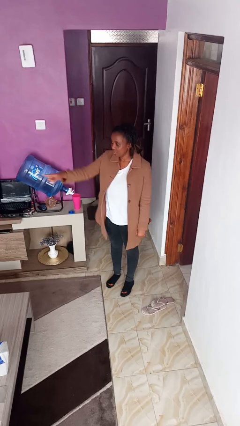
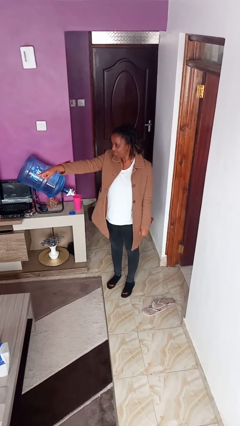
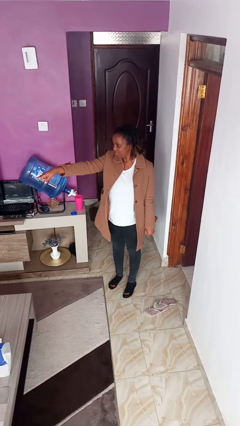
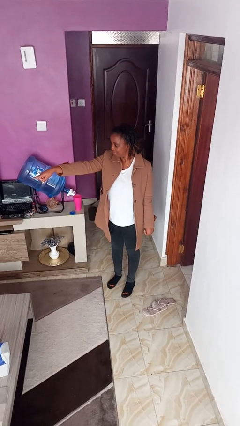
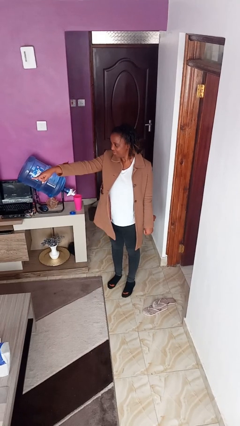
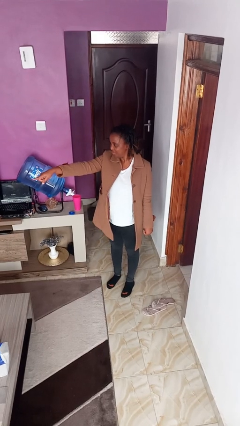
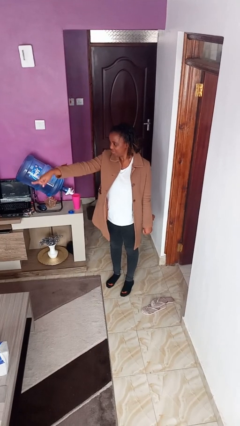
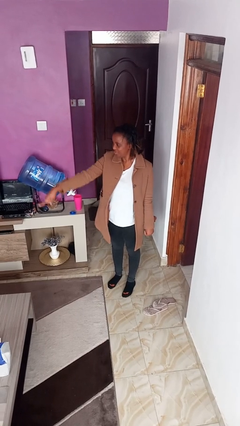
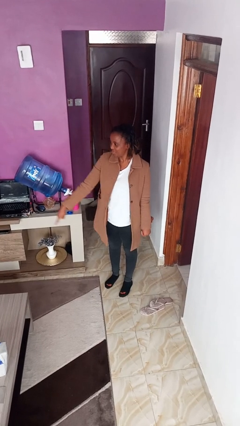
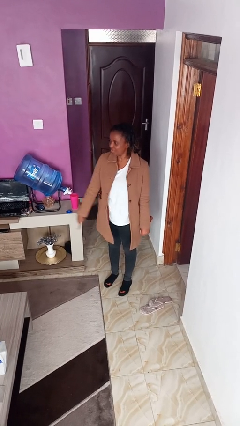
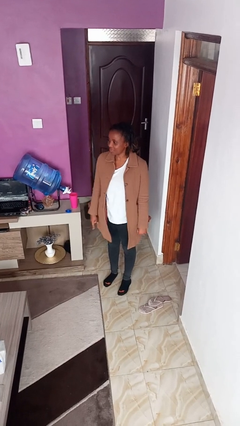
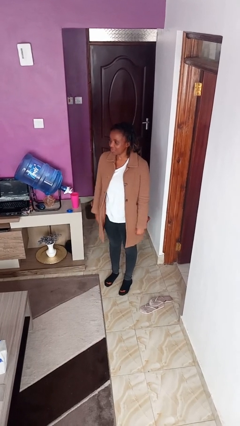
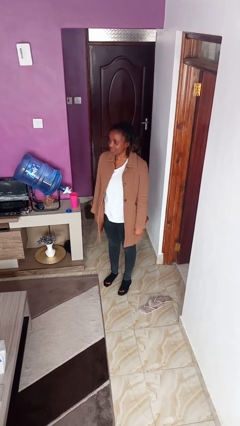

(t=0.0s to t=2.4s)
person points at person

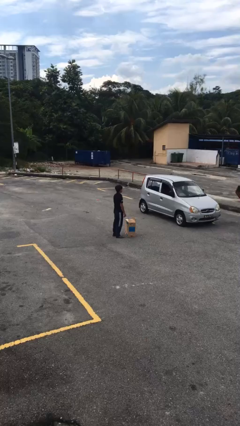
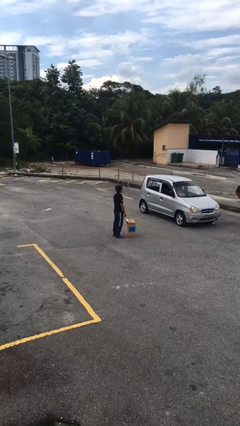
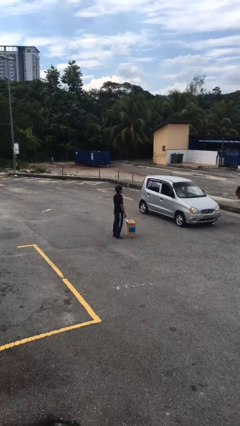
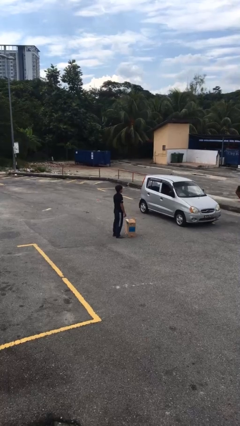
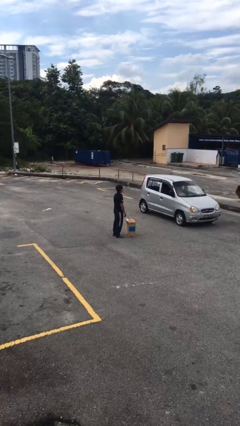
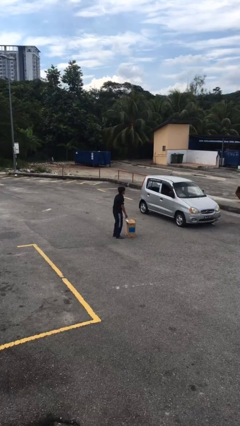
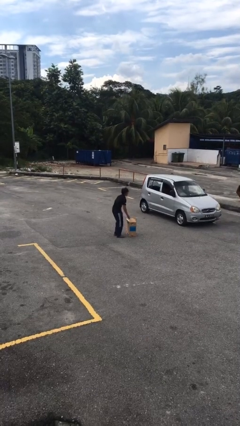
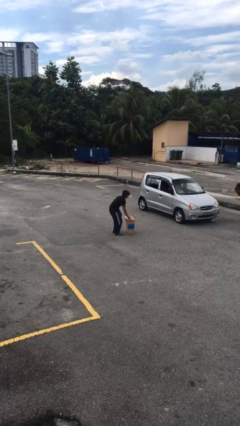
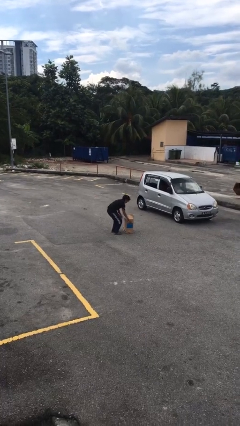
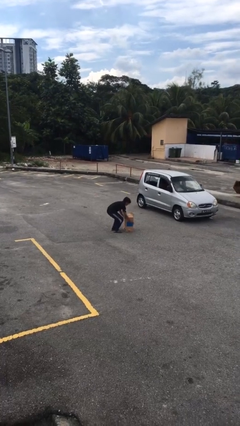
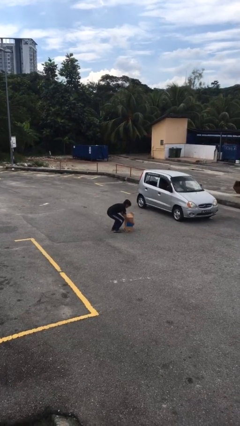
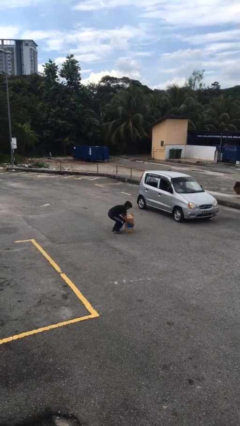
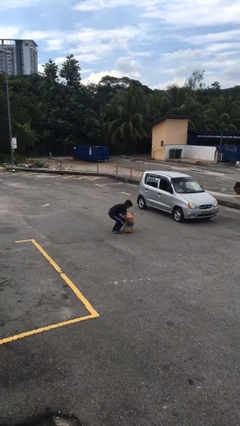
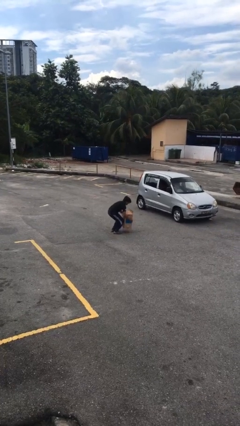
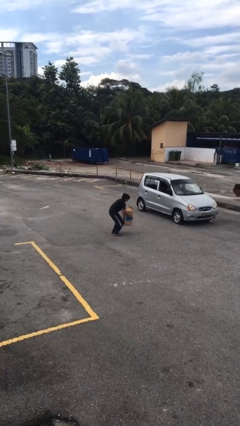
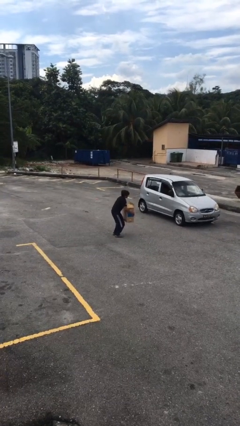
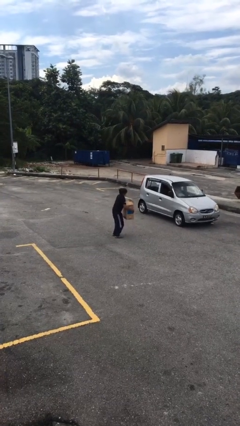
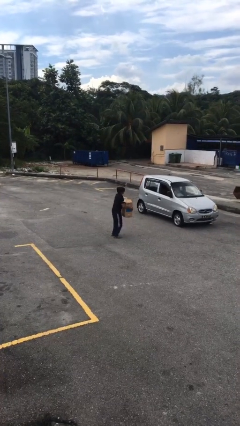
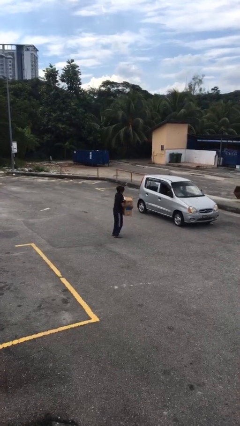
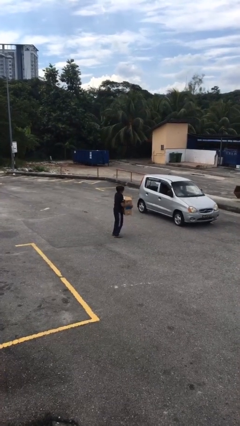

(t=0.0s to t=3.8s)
person picks up object from floor

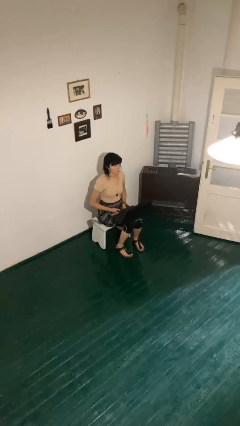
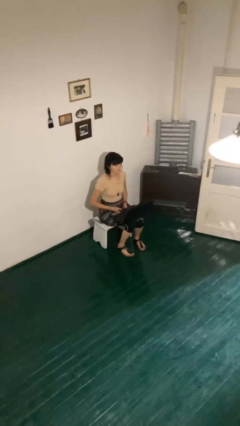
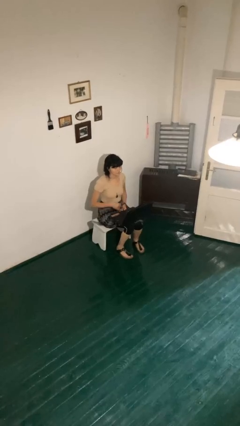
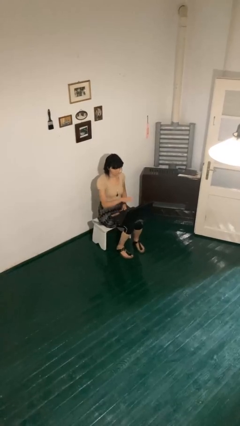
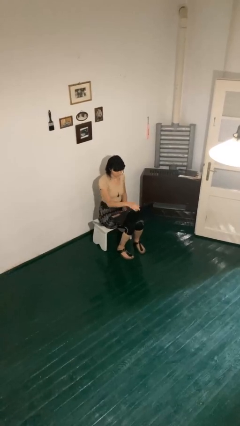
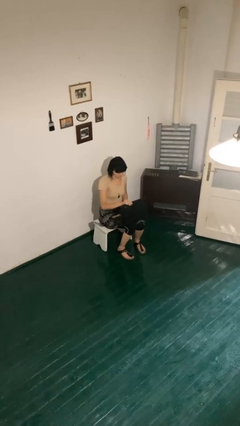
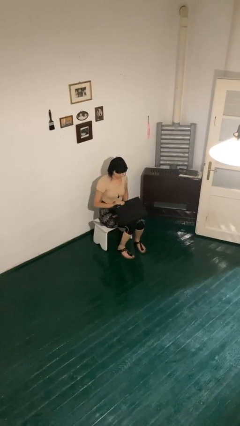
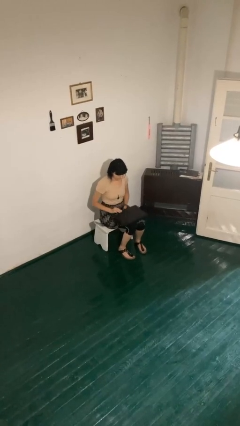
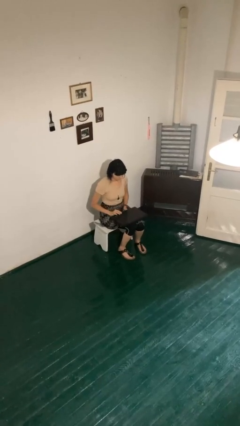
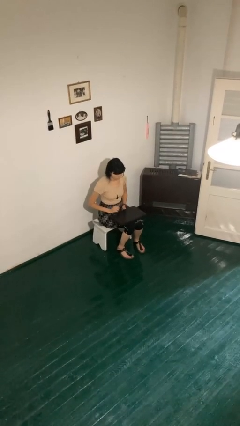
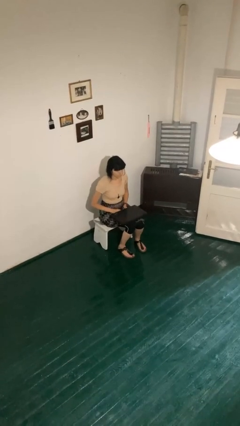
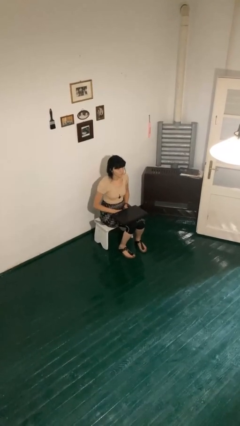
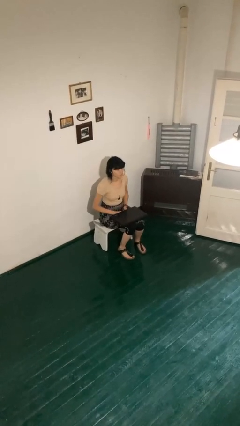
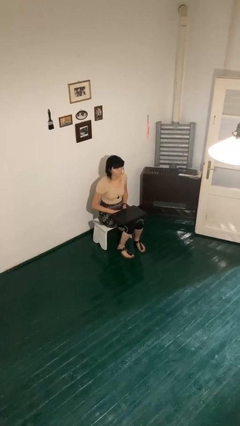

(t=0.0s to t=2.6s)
person closes laptop

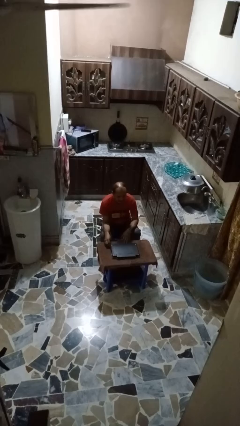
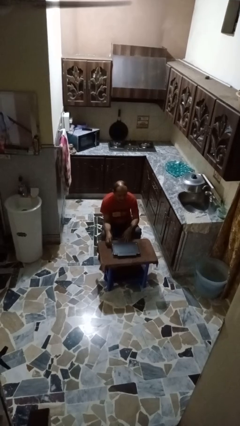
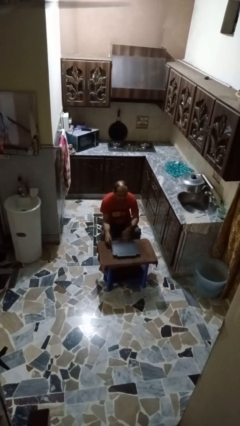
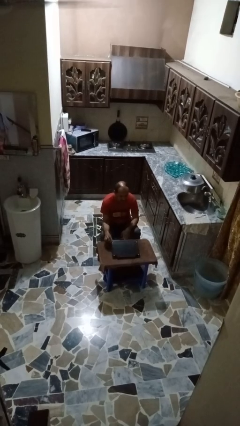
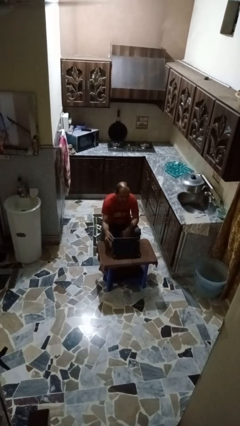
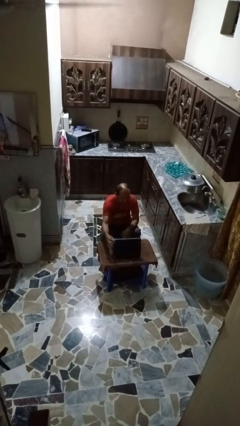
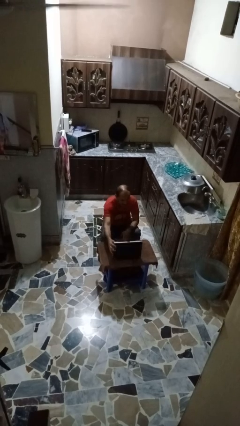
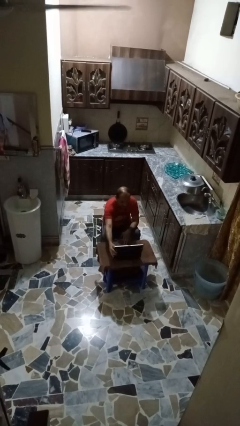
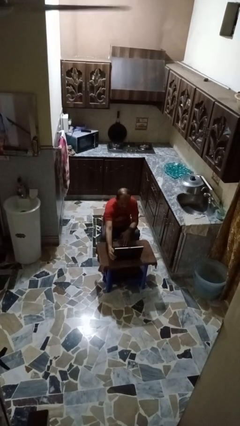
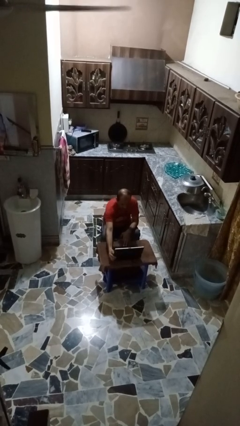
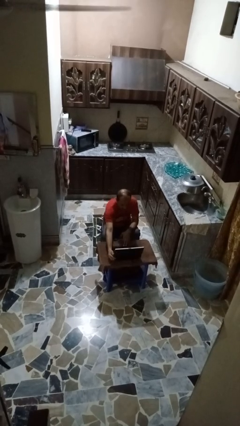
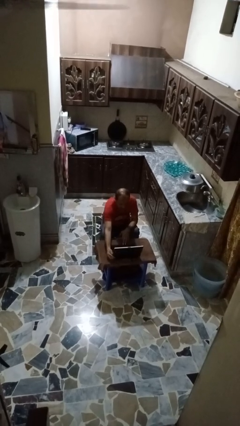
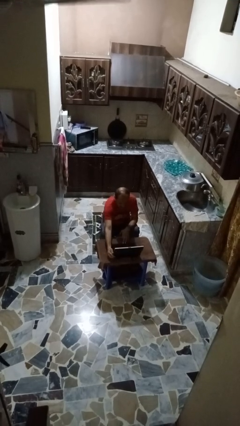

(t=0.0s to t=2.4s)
person opens laptop

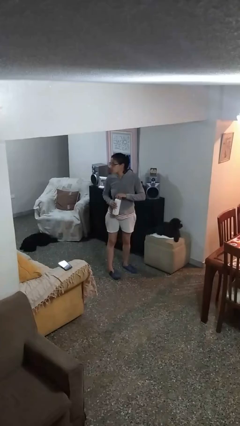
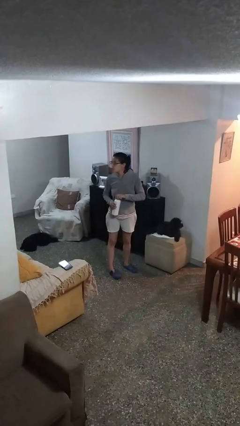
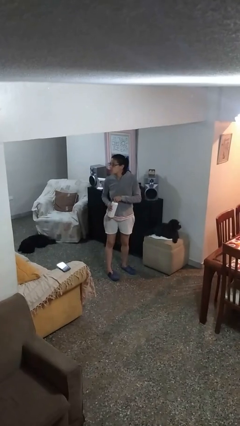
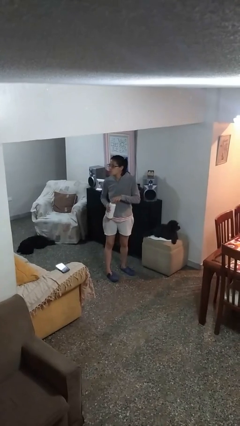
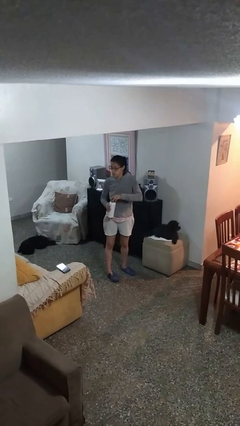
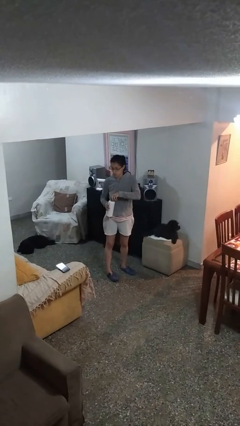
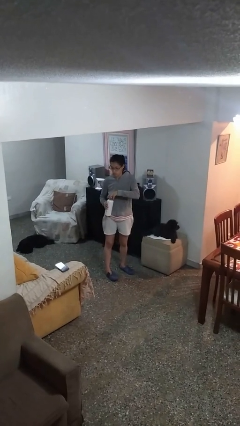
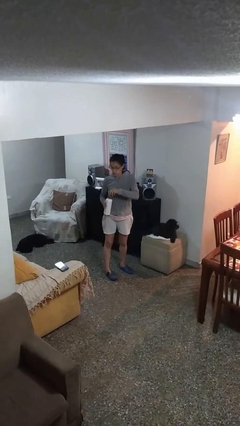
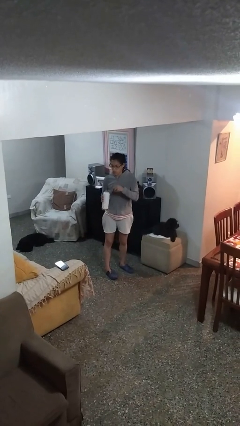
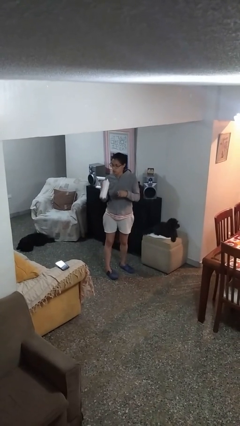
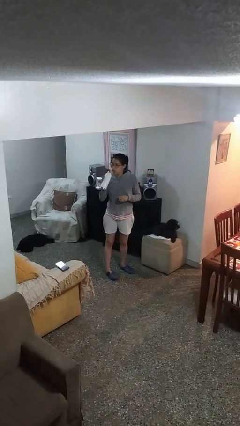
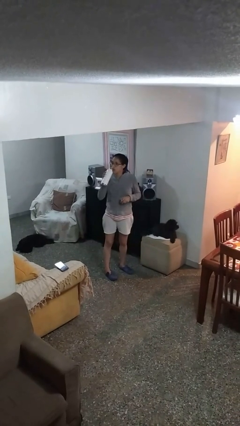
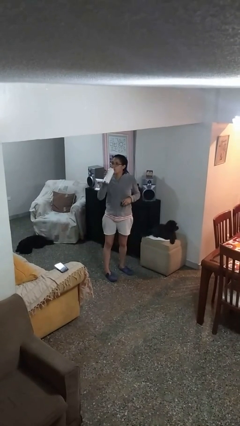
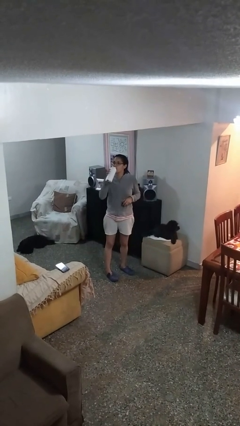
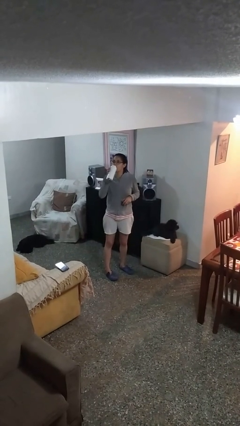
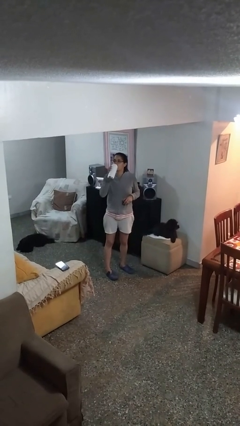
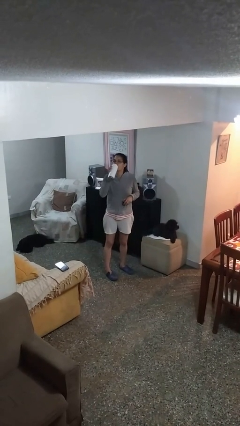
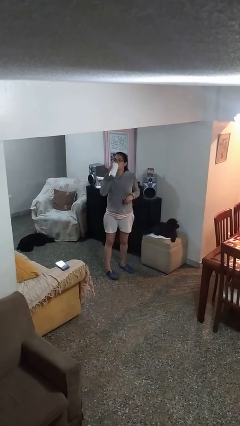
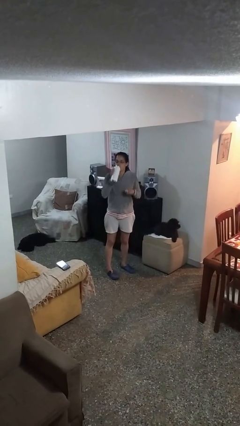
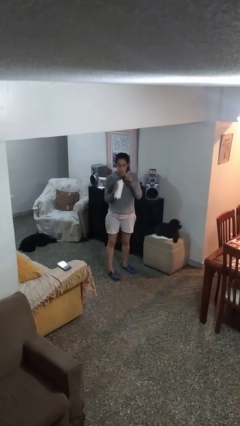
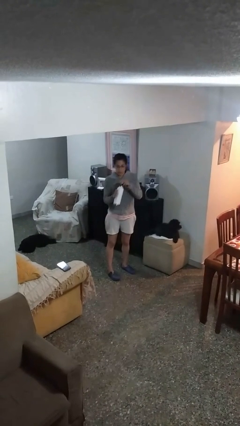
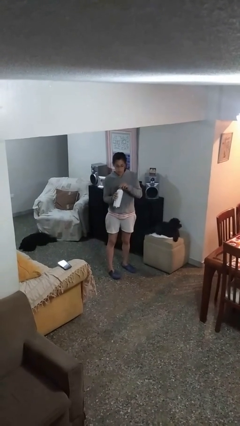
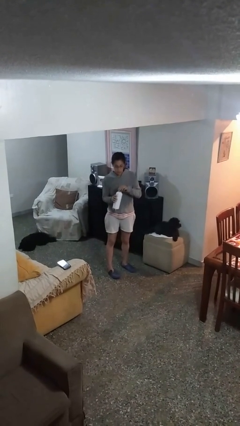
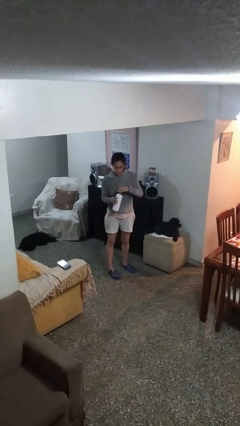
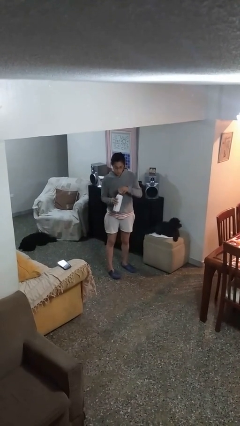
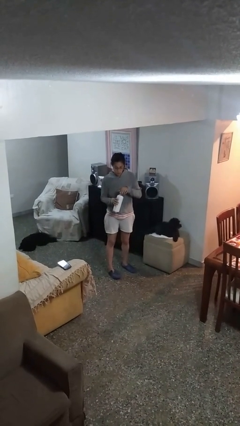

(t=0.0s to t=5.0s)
person drinks from bottle

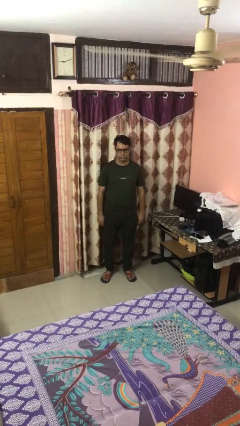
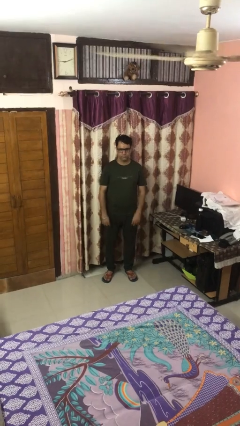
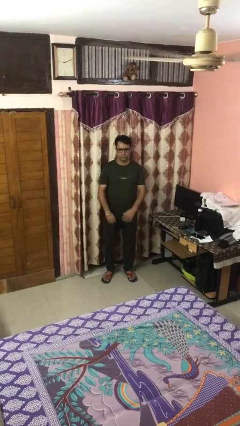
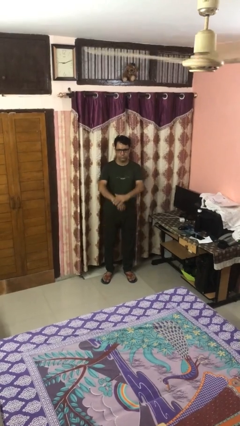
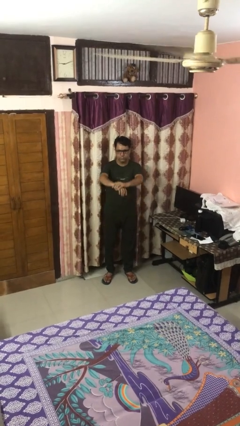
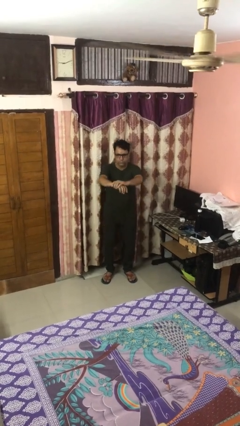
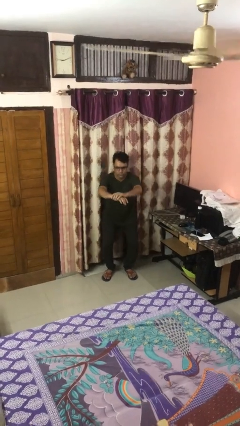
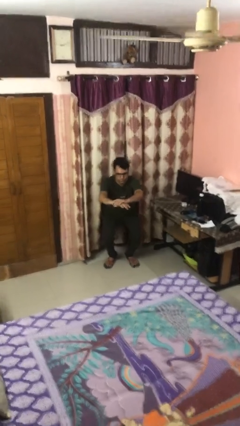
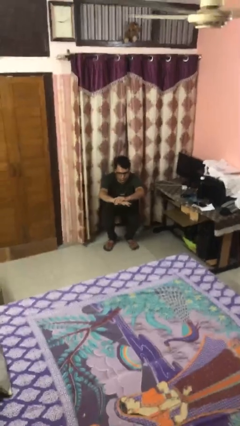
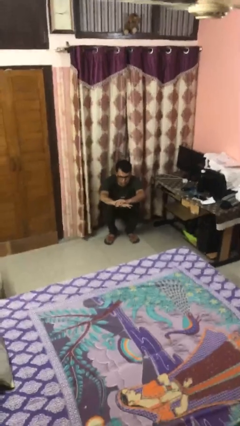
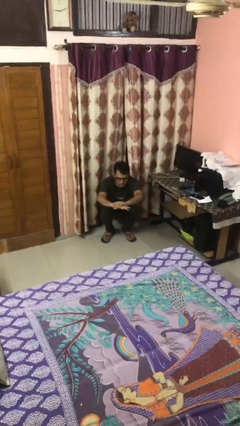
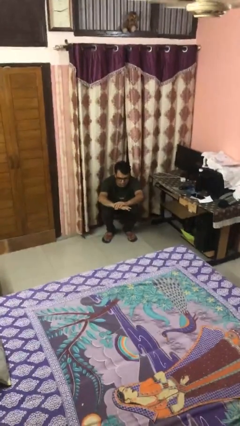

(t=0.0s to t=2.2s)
person squats
